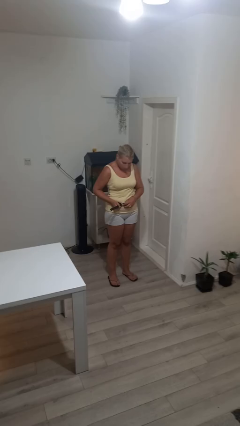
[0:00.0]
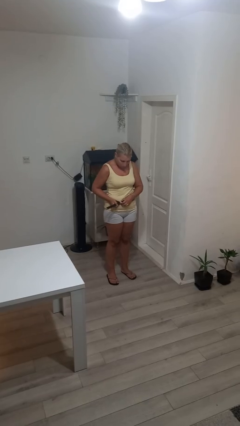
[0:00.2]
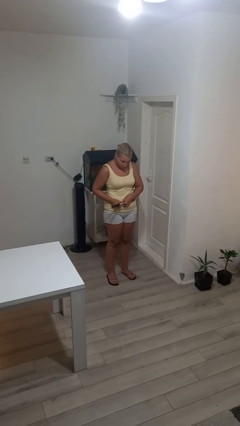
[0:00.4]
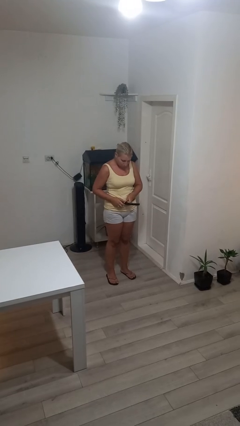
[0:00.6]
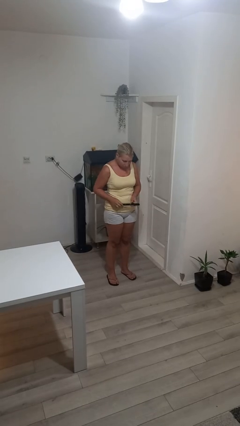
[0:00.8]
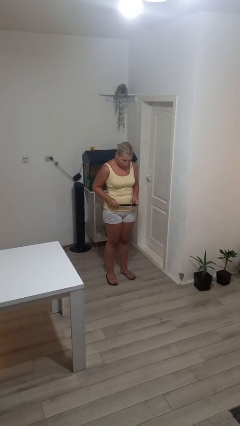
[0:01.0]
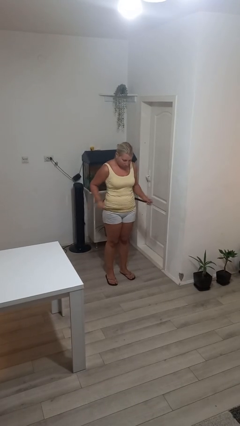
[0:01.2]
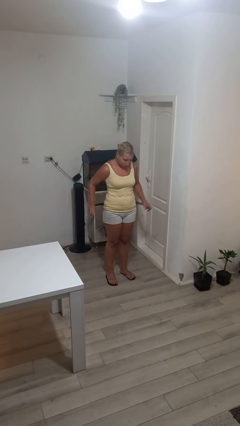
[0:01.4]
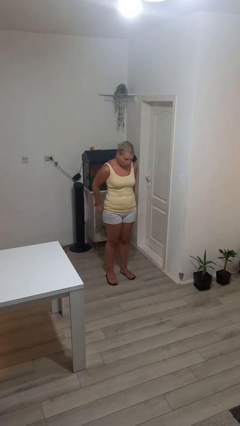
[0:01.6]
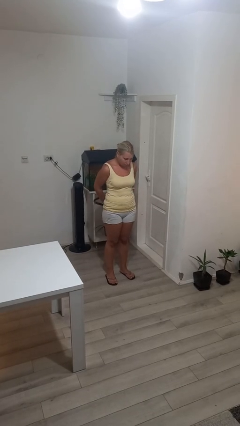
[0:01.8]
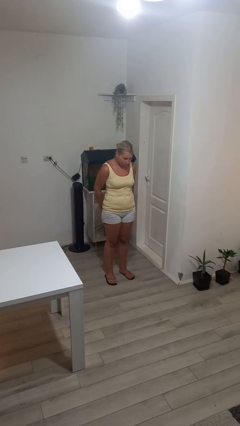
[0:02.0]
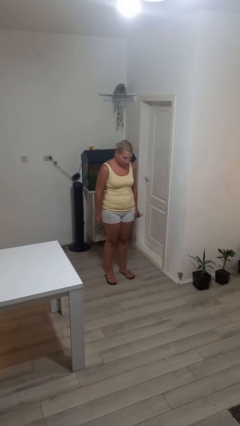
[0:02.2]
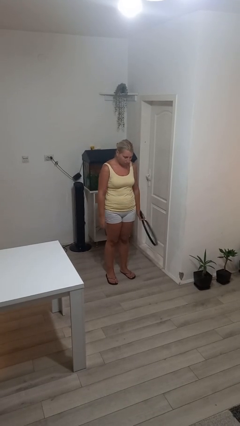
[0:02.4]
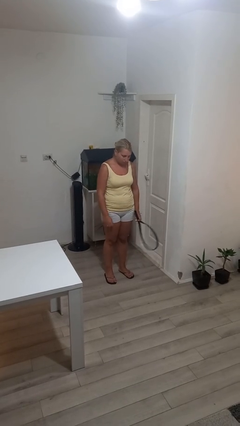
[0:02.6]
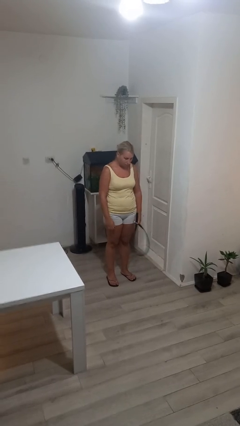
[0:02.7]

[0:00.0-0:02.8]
person takes off belt

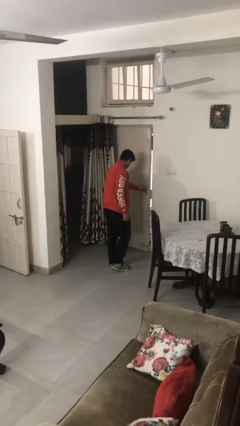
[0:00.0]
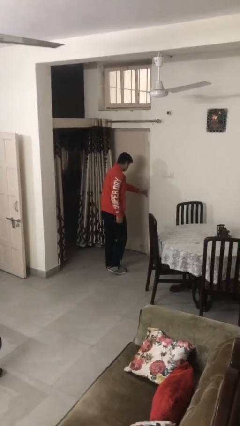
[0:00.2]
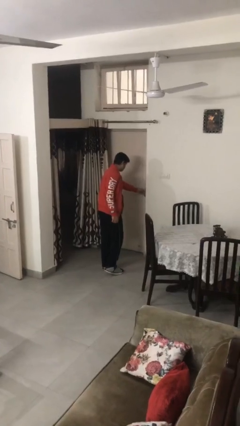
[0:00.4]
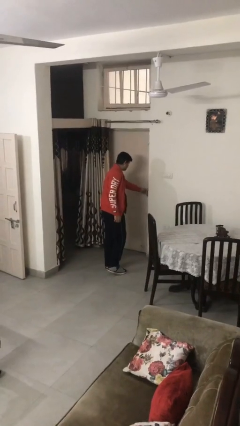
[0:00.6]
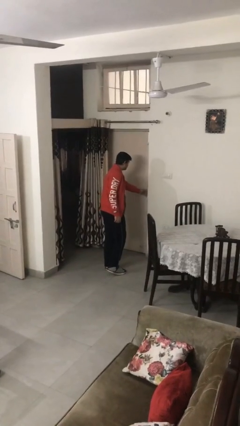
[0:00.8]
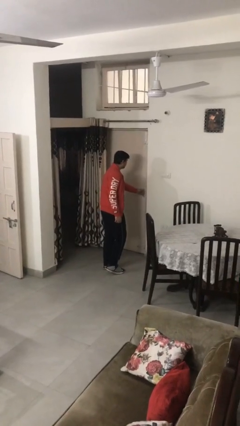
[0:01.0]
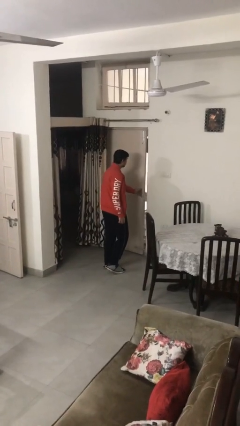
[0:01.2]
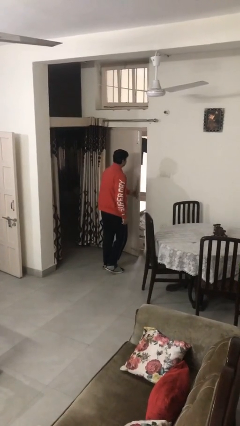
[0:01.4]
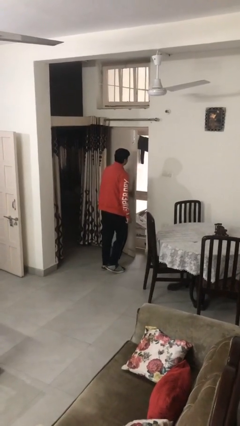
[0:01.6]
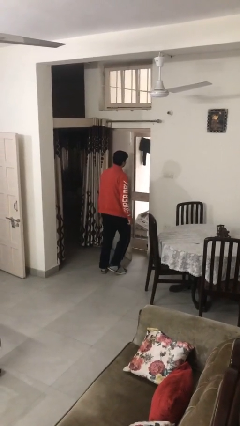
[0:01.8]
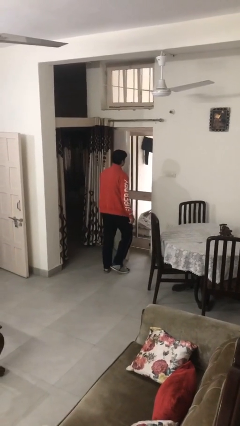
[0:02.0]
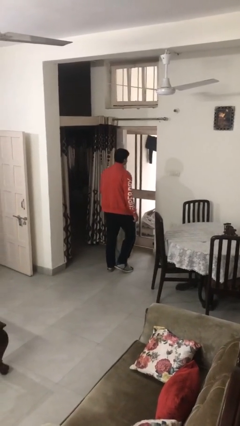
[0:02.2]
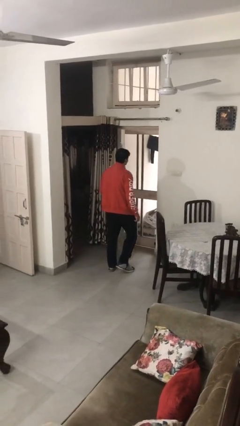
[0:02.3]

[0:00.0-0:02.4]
person opens facility door

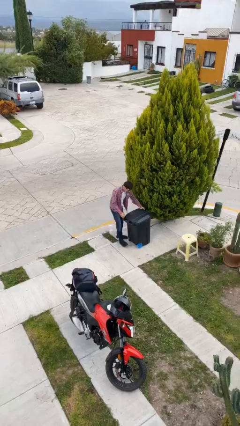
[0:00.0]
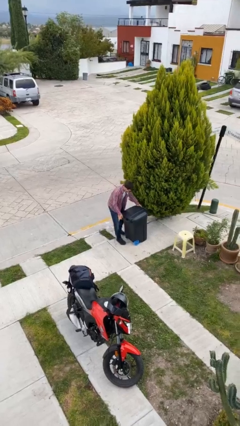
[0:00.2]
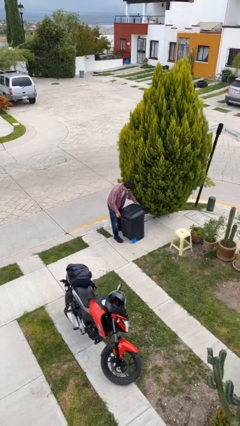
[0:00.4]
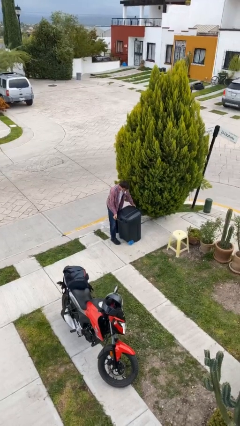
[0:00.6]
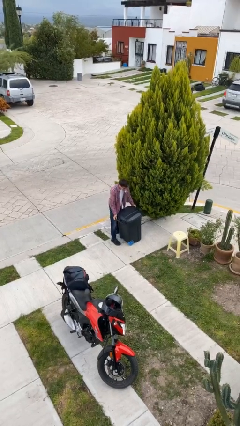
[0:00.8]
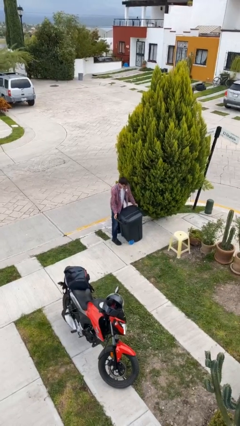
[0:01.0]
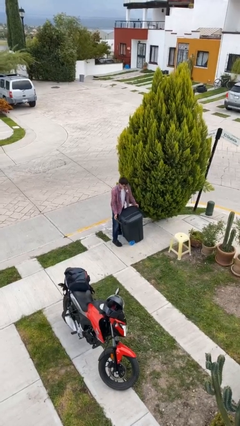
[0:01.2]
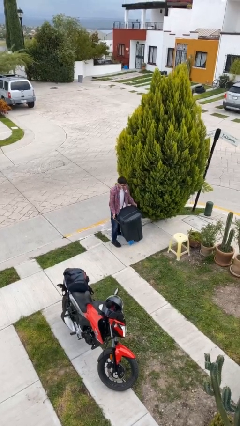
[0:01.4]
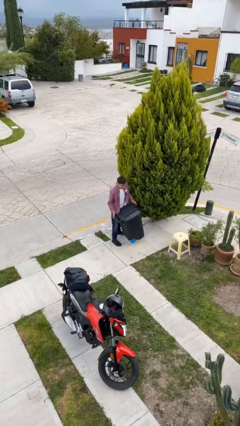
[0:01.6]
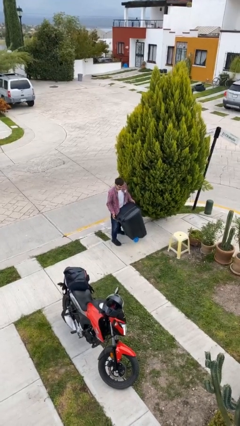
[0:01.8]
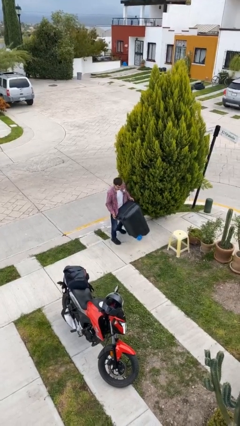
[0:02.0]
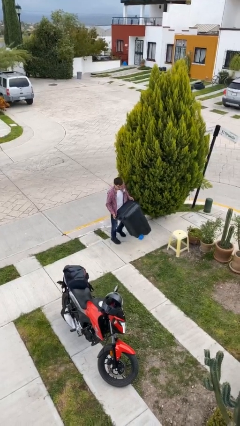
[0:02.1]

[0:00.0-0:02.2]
person picks up object from floor

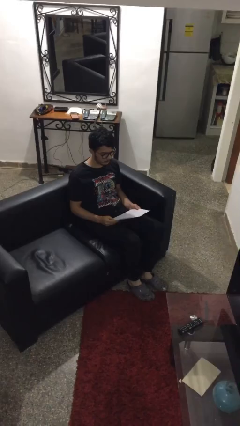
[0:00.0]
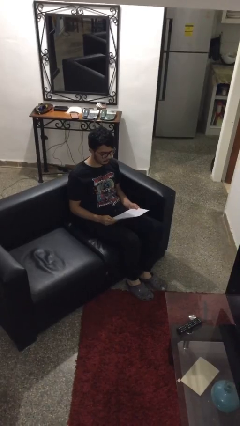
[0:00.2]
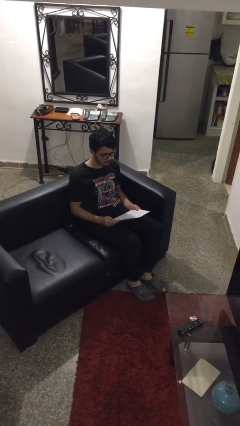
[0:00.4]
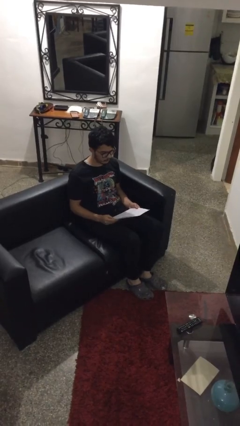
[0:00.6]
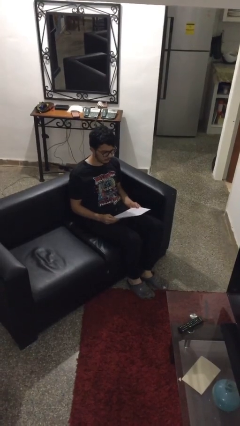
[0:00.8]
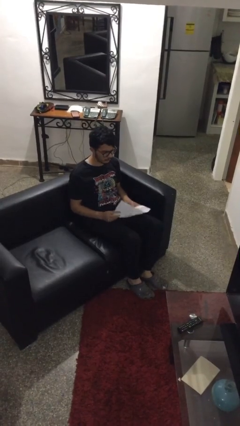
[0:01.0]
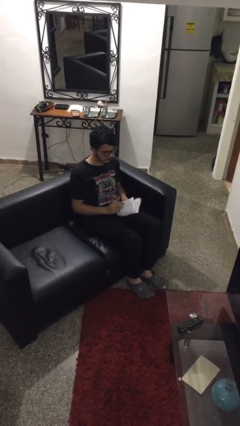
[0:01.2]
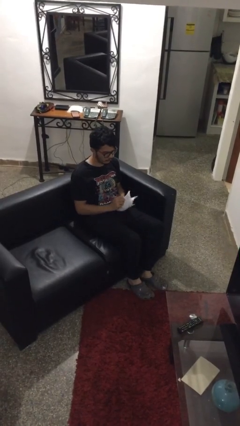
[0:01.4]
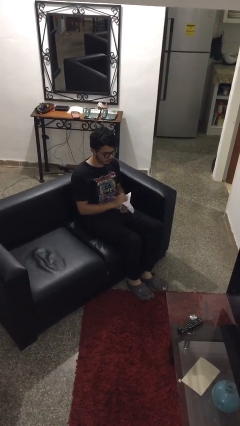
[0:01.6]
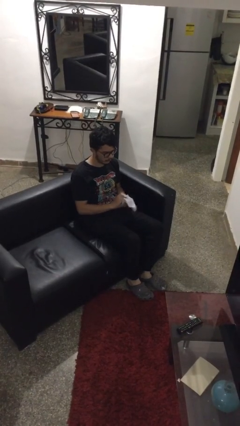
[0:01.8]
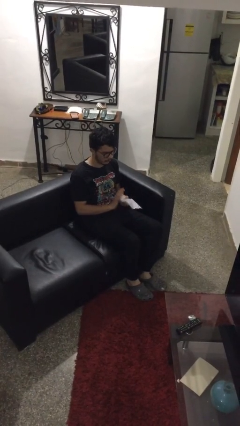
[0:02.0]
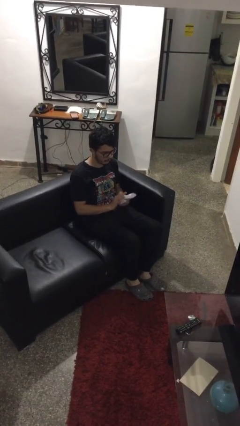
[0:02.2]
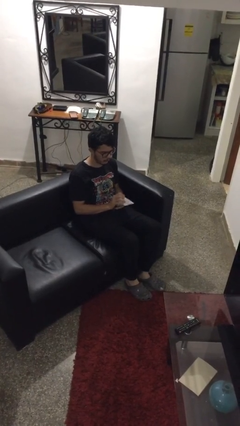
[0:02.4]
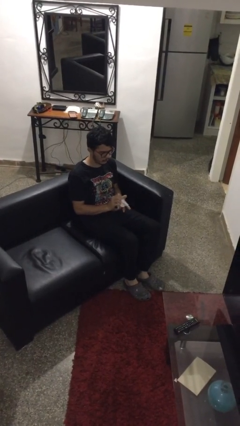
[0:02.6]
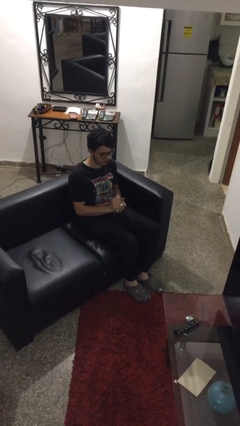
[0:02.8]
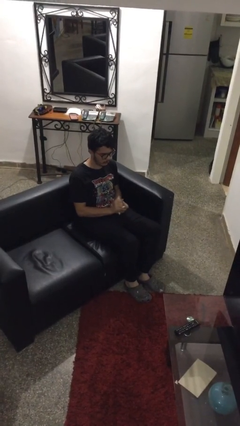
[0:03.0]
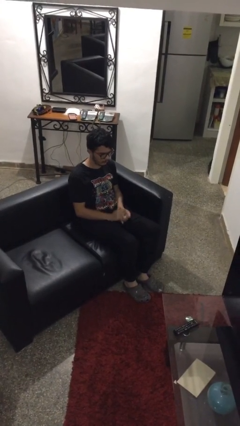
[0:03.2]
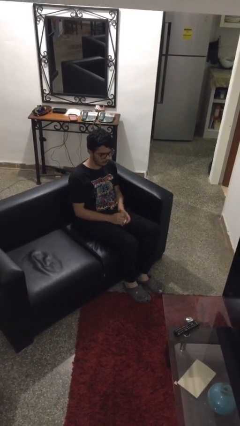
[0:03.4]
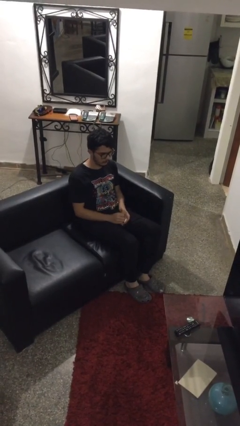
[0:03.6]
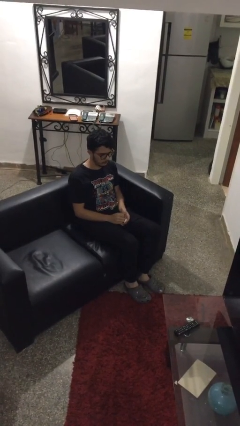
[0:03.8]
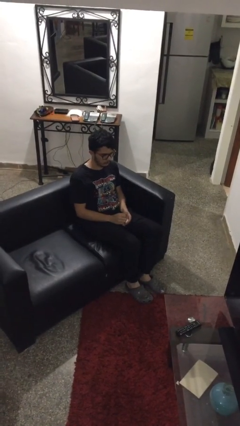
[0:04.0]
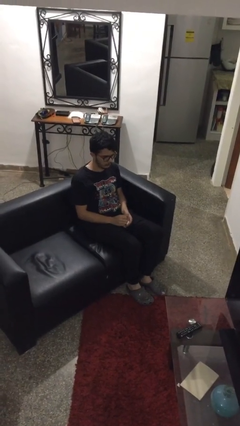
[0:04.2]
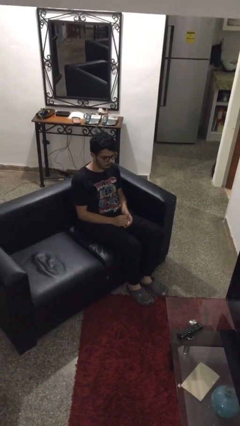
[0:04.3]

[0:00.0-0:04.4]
person crumples paper

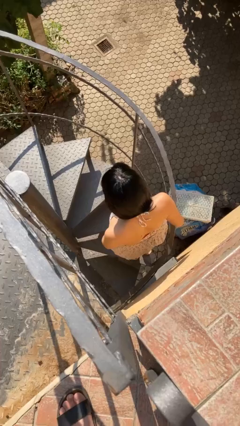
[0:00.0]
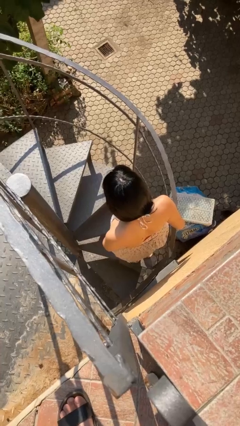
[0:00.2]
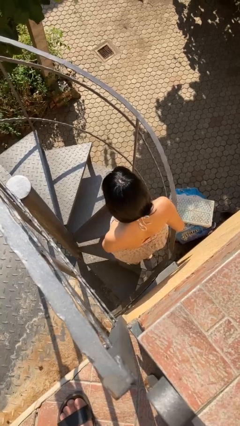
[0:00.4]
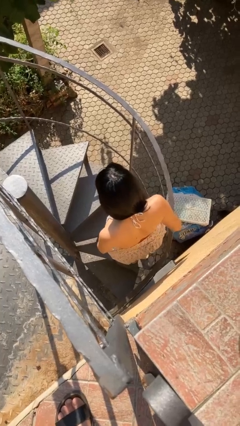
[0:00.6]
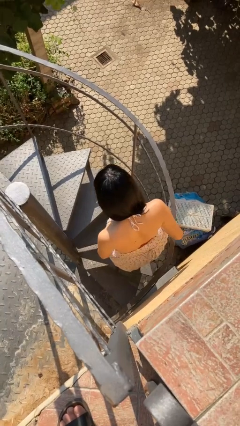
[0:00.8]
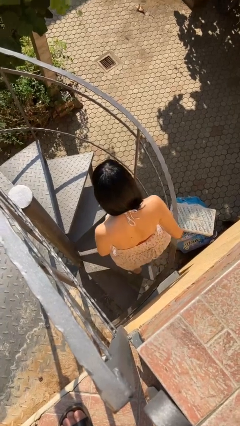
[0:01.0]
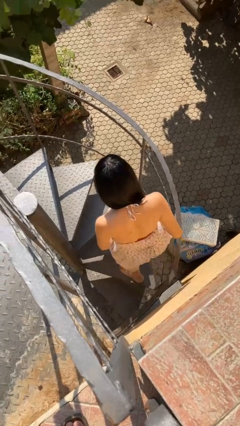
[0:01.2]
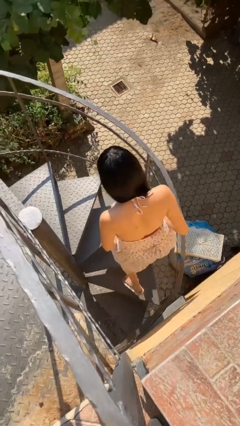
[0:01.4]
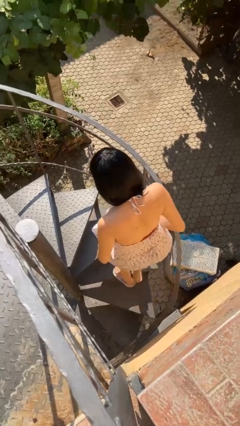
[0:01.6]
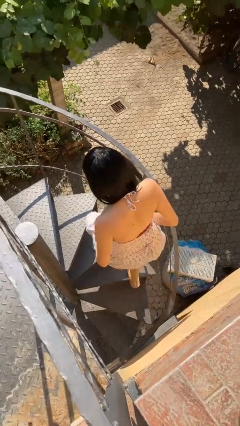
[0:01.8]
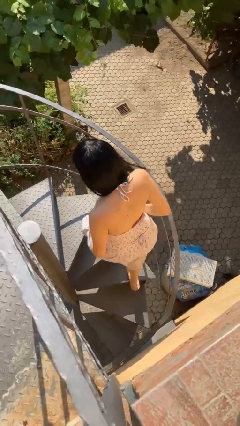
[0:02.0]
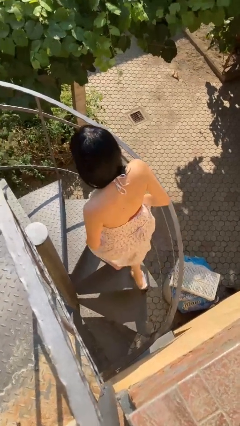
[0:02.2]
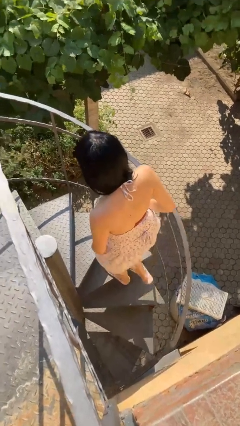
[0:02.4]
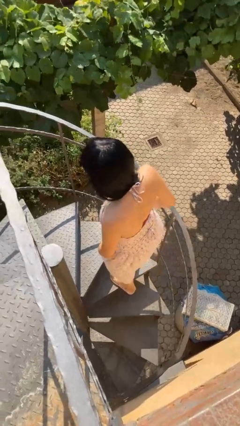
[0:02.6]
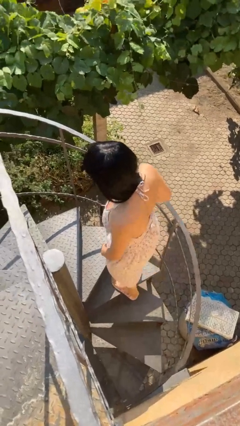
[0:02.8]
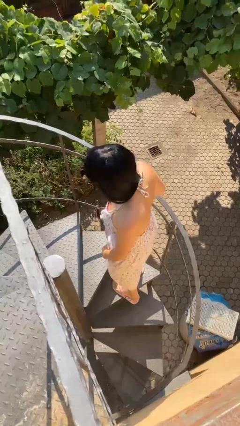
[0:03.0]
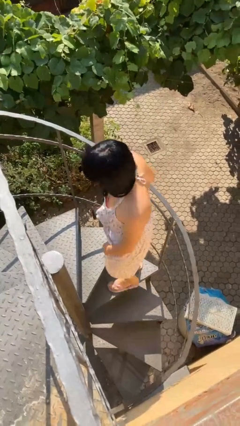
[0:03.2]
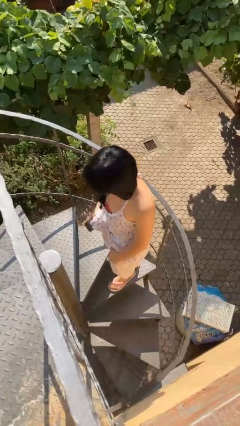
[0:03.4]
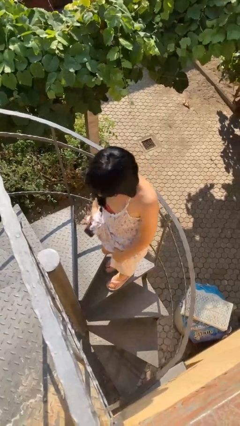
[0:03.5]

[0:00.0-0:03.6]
person climbs up stairs

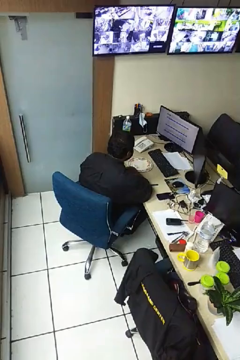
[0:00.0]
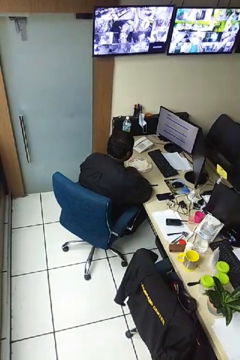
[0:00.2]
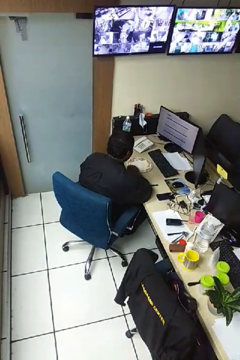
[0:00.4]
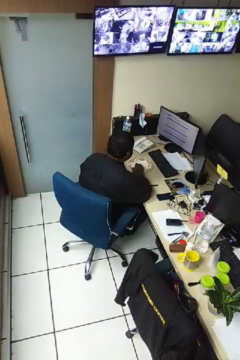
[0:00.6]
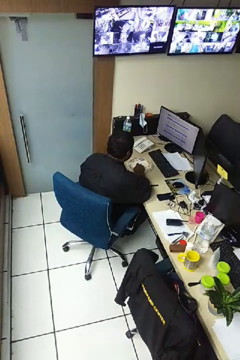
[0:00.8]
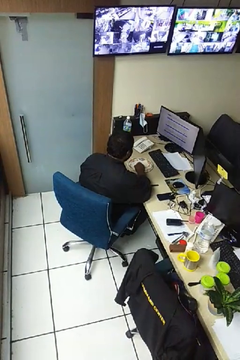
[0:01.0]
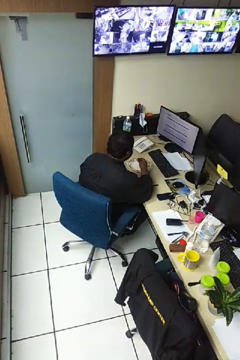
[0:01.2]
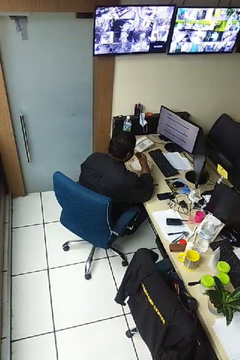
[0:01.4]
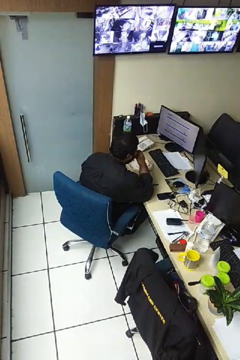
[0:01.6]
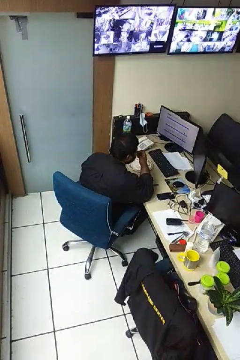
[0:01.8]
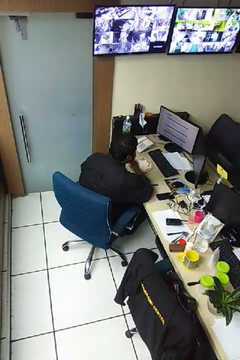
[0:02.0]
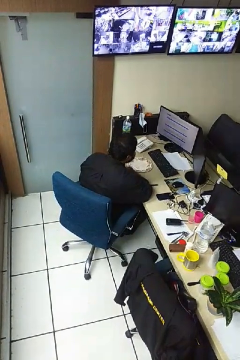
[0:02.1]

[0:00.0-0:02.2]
person eats with hands
